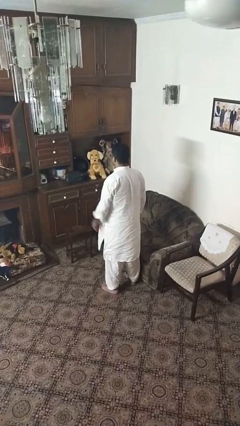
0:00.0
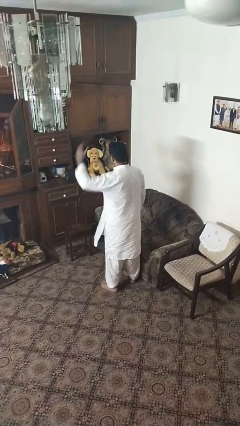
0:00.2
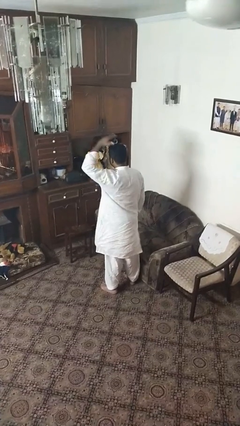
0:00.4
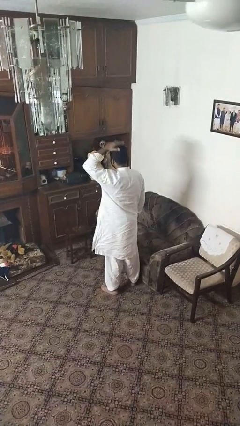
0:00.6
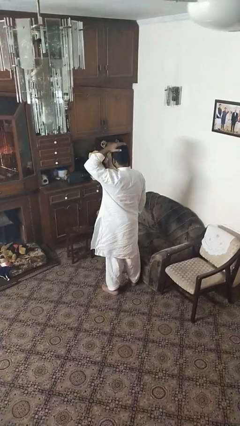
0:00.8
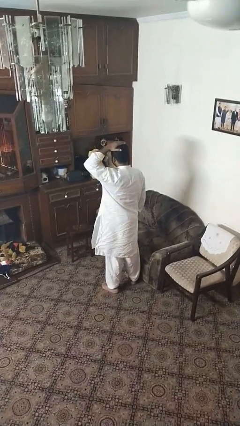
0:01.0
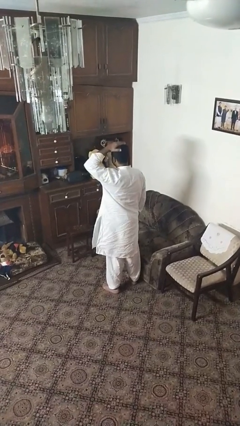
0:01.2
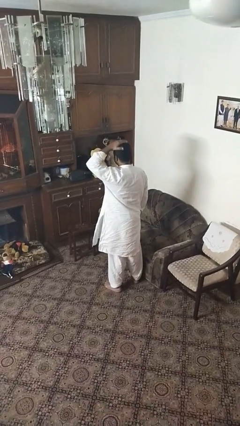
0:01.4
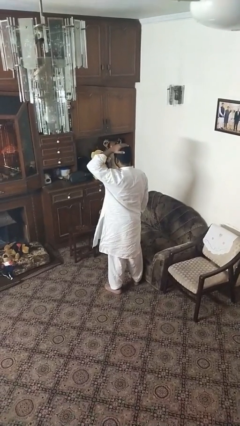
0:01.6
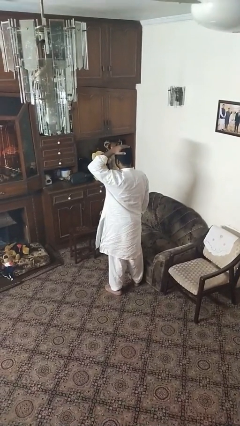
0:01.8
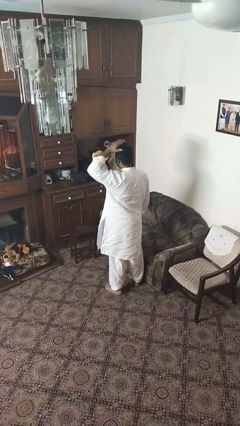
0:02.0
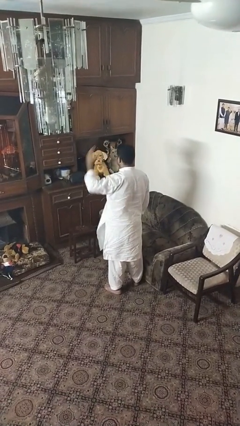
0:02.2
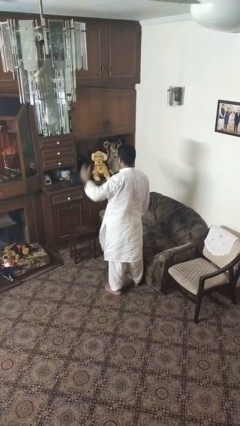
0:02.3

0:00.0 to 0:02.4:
person pats head

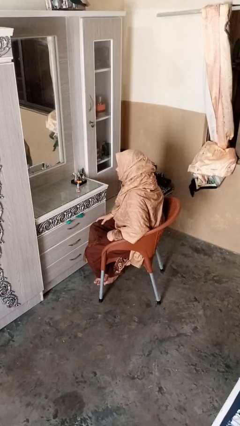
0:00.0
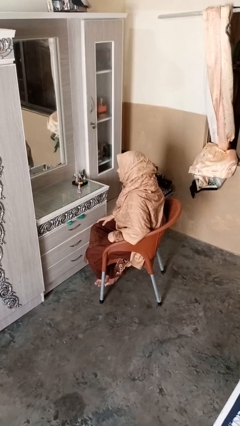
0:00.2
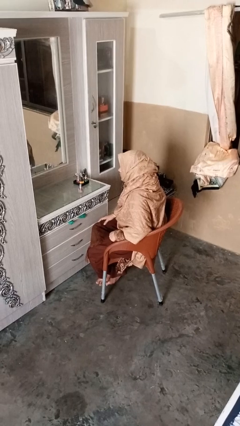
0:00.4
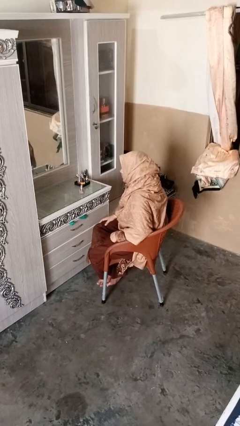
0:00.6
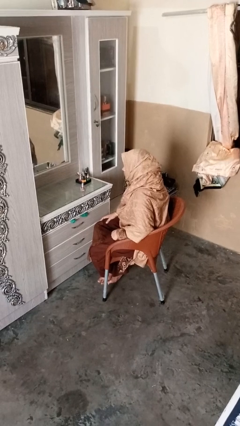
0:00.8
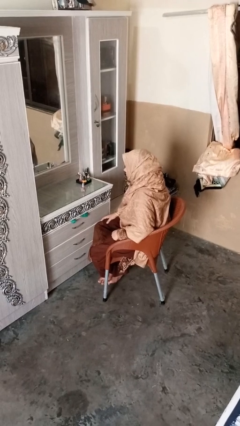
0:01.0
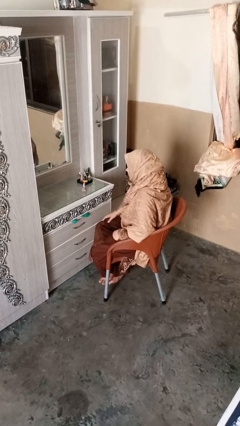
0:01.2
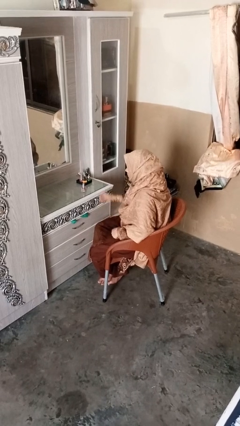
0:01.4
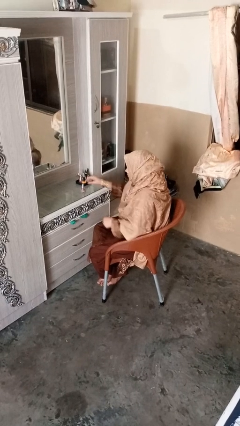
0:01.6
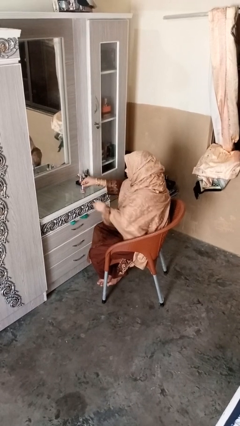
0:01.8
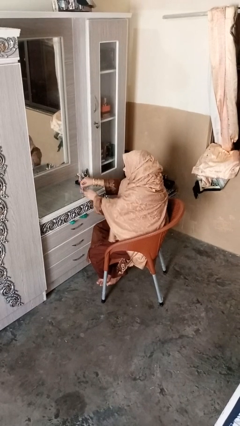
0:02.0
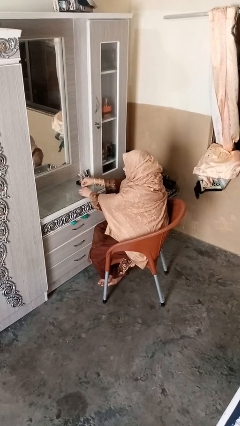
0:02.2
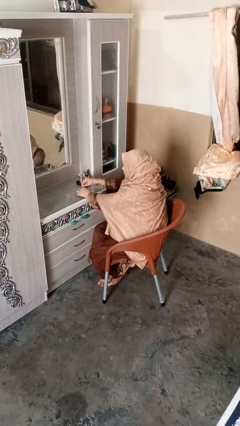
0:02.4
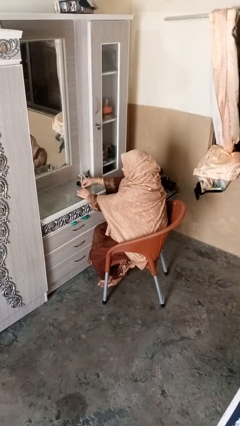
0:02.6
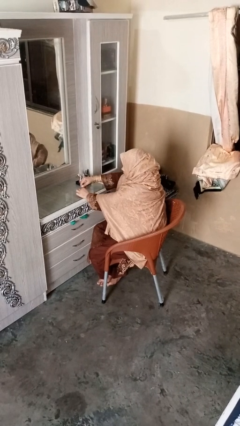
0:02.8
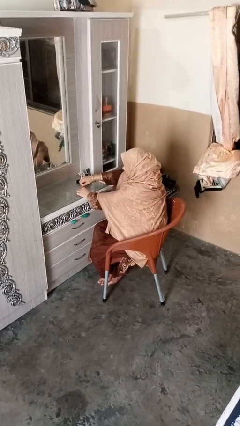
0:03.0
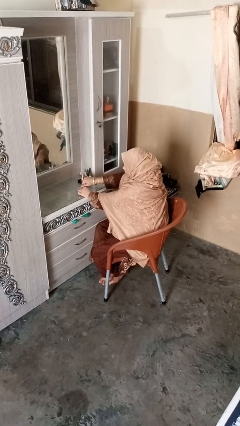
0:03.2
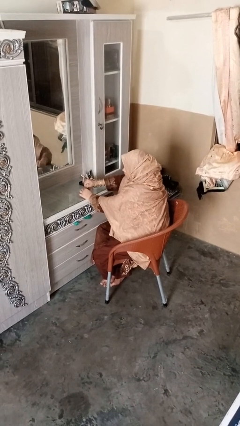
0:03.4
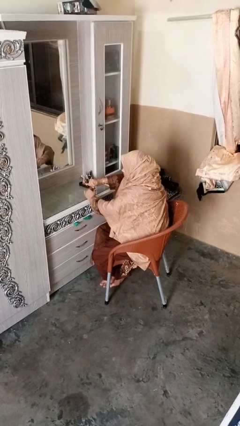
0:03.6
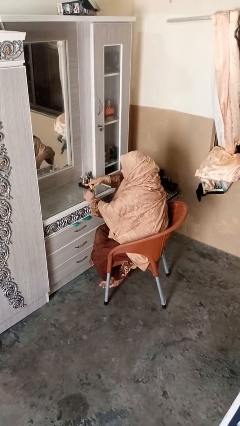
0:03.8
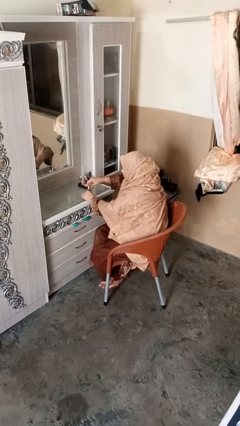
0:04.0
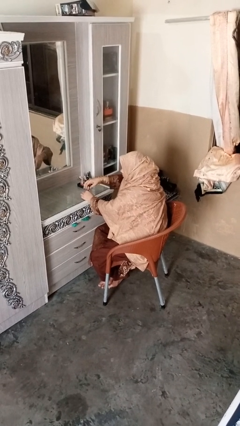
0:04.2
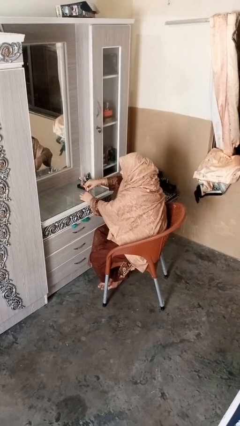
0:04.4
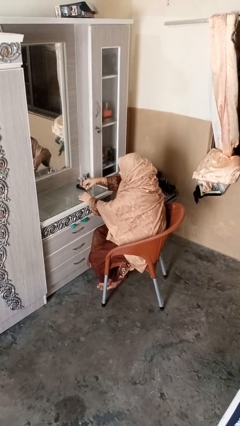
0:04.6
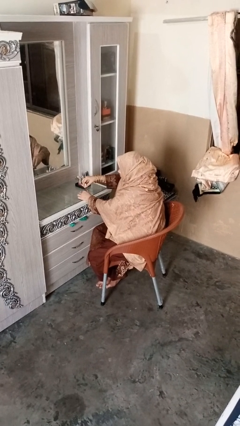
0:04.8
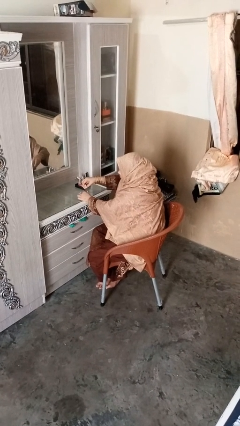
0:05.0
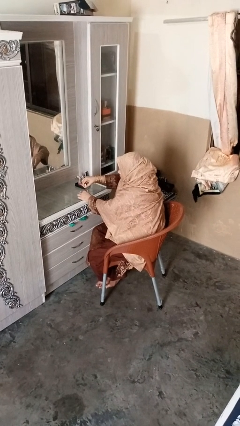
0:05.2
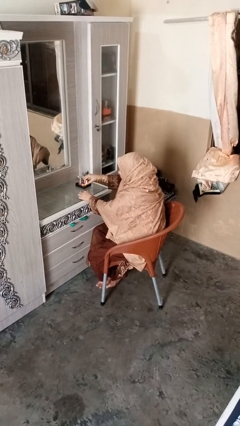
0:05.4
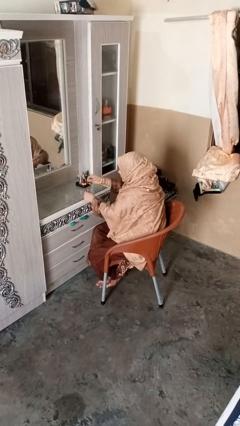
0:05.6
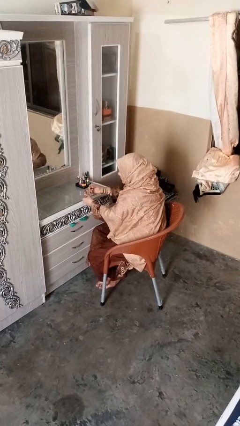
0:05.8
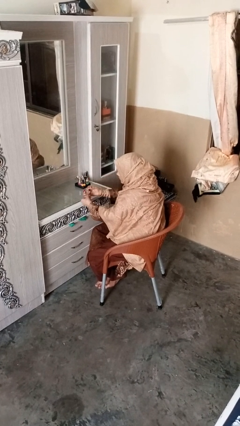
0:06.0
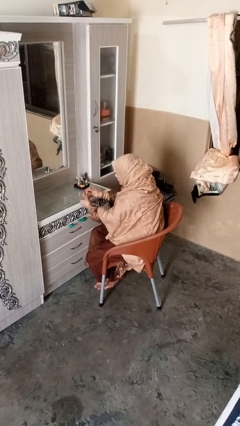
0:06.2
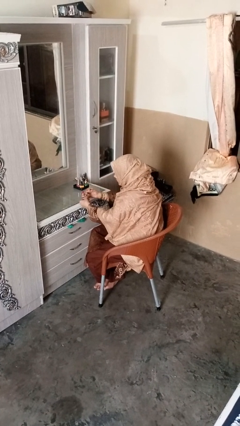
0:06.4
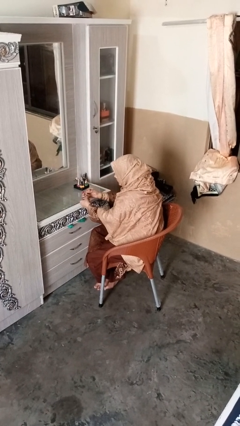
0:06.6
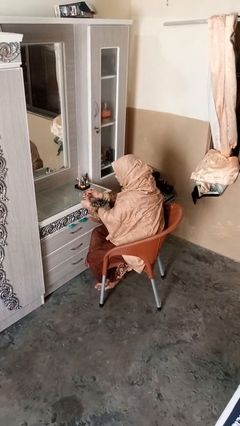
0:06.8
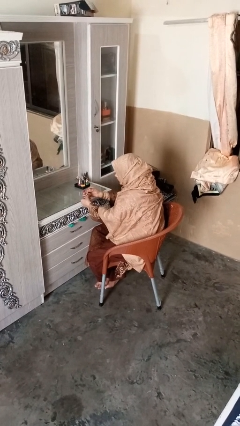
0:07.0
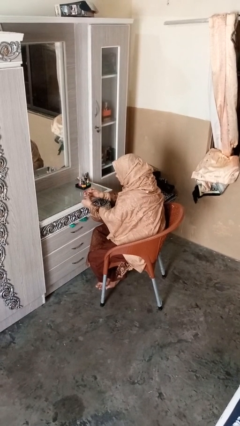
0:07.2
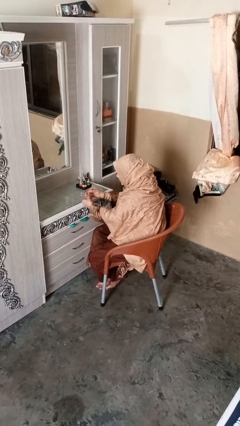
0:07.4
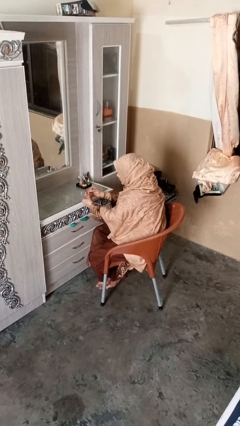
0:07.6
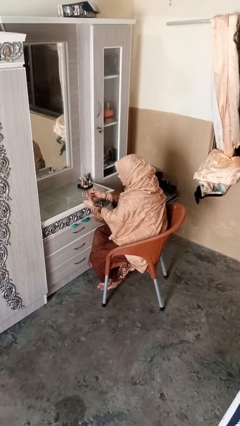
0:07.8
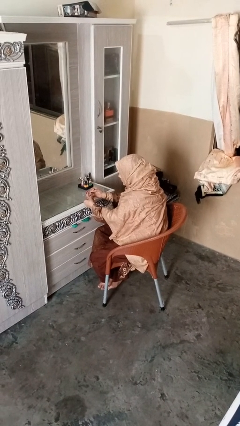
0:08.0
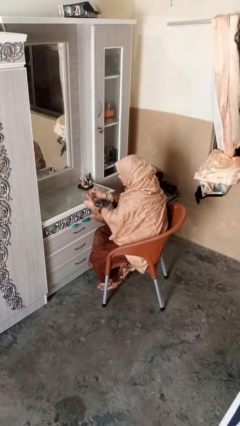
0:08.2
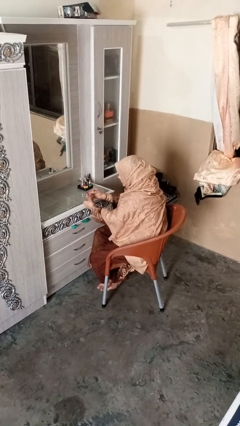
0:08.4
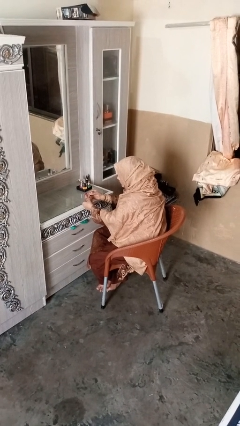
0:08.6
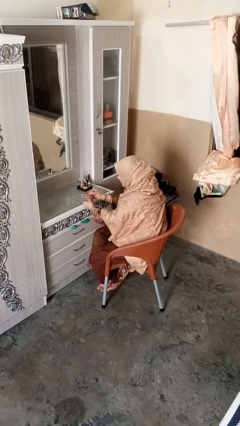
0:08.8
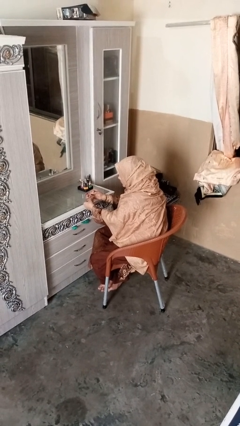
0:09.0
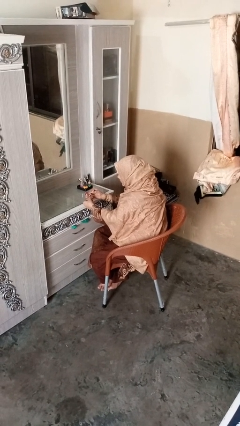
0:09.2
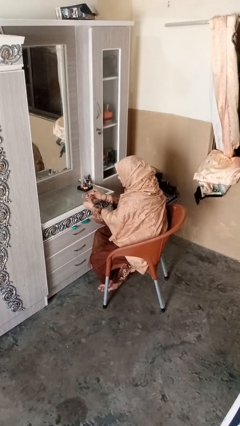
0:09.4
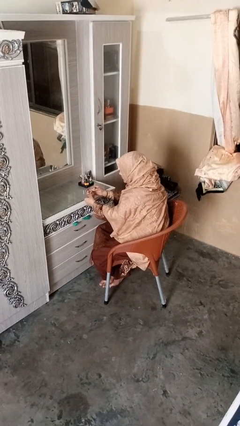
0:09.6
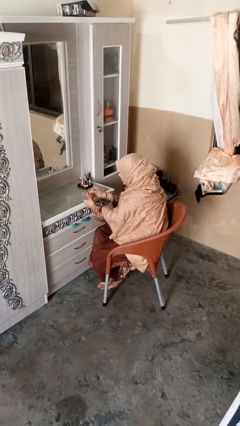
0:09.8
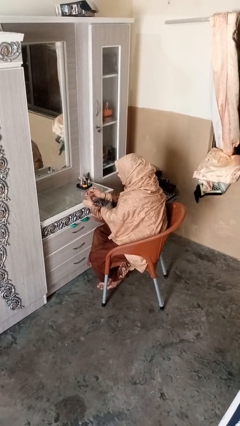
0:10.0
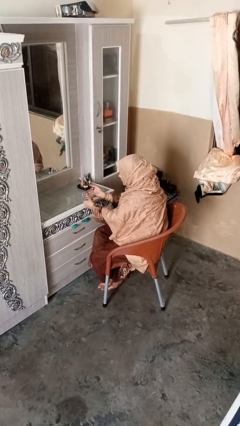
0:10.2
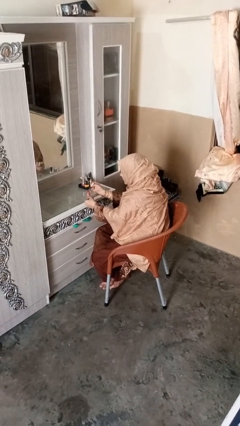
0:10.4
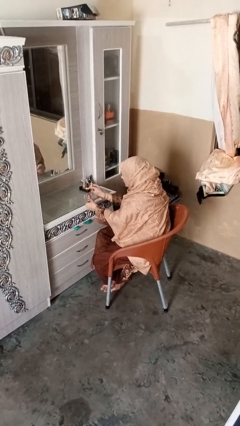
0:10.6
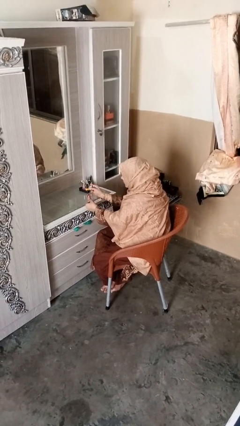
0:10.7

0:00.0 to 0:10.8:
person paints fingernails

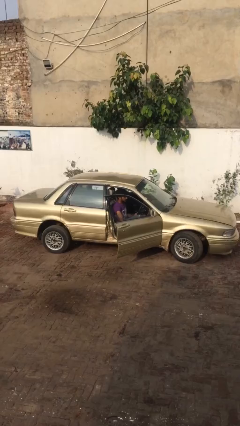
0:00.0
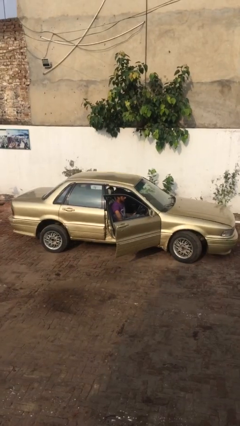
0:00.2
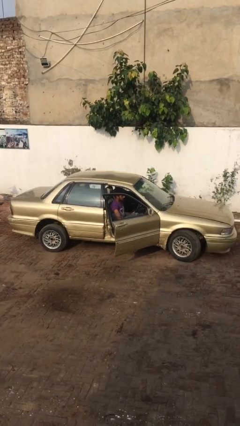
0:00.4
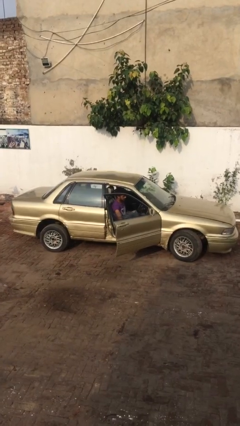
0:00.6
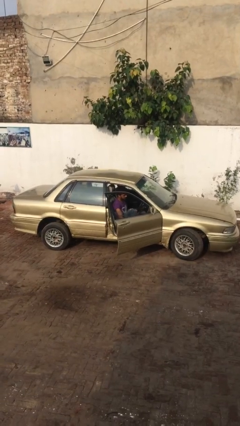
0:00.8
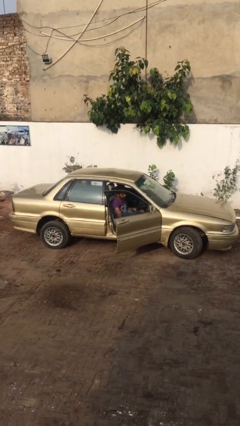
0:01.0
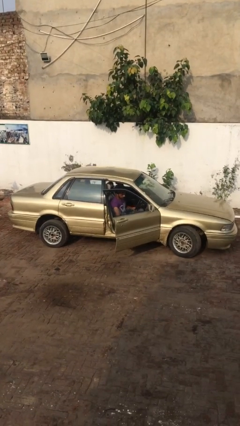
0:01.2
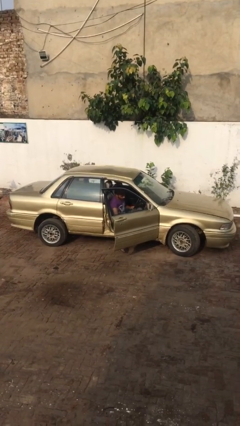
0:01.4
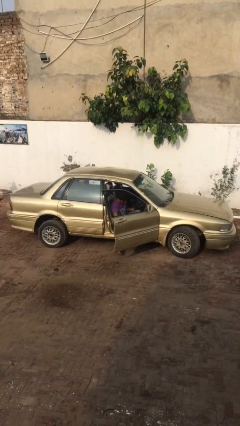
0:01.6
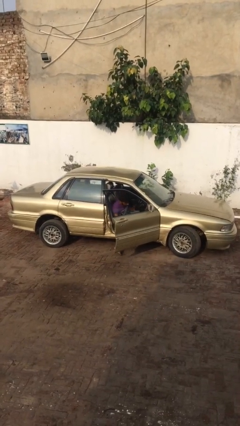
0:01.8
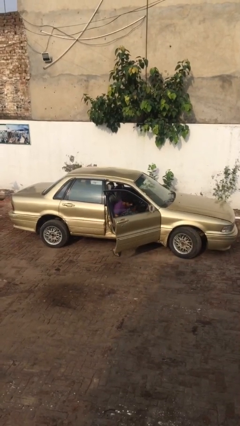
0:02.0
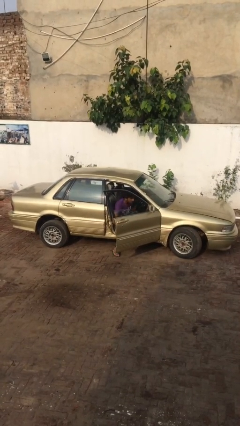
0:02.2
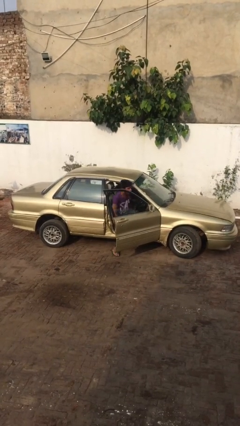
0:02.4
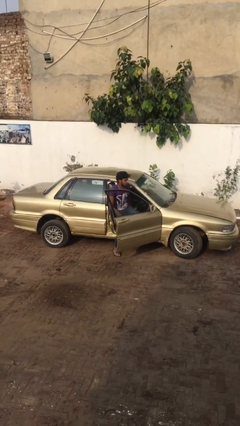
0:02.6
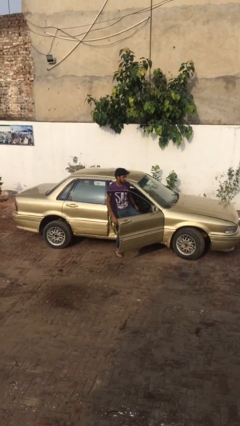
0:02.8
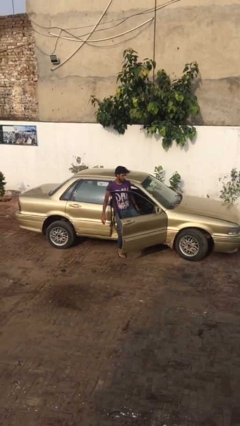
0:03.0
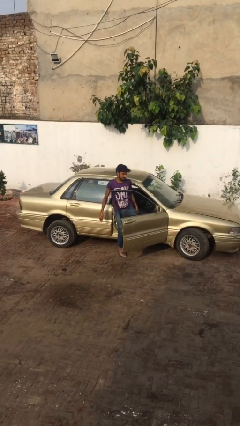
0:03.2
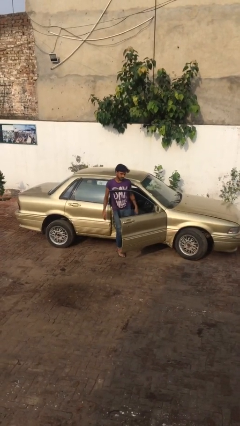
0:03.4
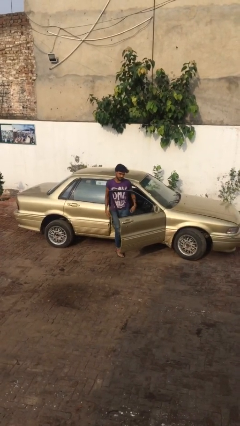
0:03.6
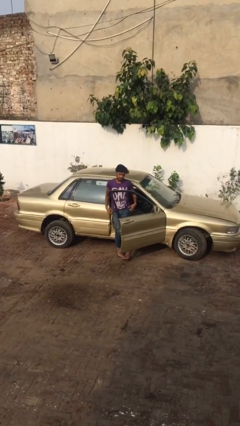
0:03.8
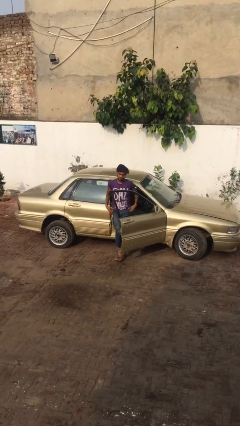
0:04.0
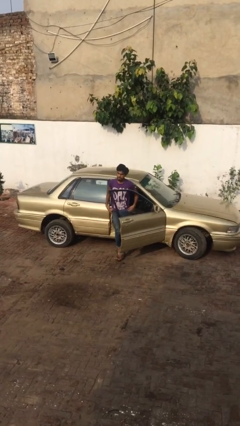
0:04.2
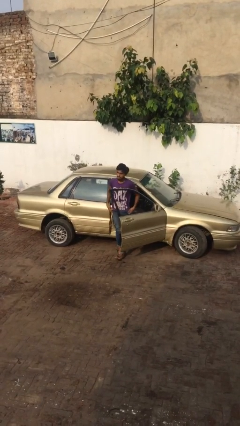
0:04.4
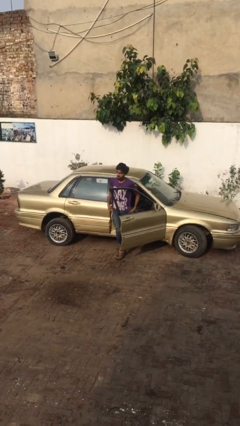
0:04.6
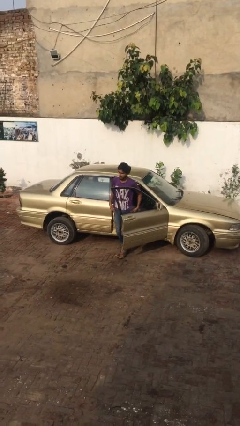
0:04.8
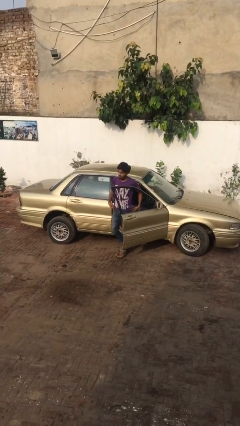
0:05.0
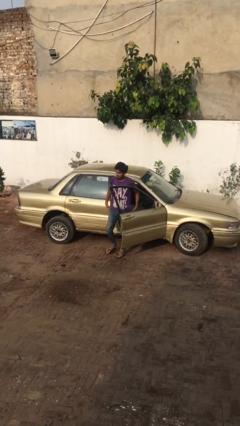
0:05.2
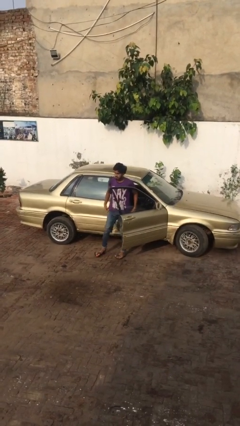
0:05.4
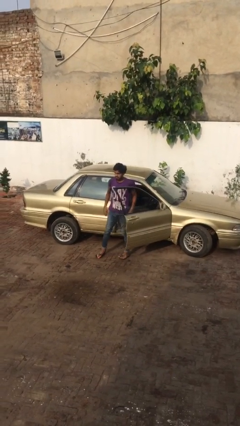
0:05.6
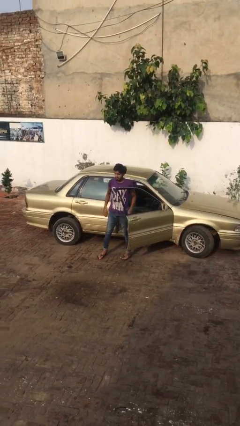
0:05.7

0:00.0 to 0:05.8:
person exits car
